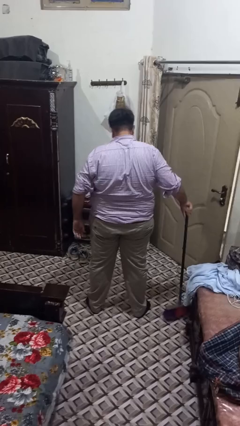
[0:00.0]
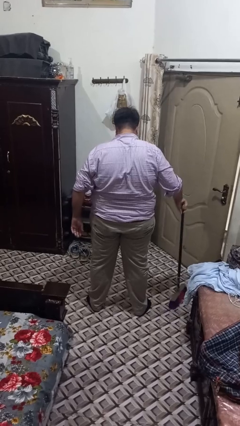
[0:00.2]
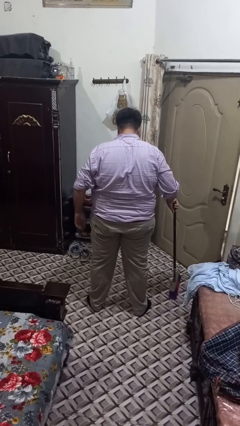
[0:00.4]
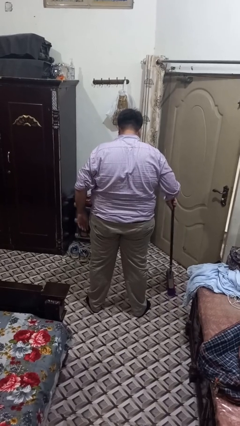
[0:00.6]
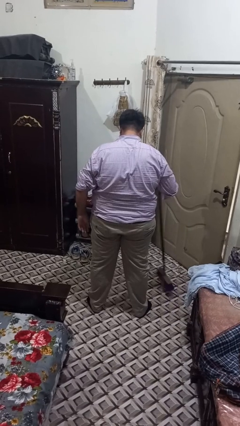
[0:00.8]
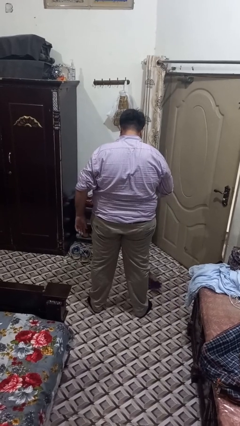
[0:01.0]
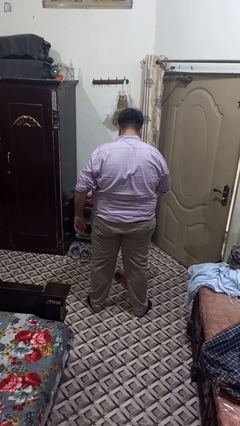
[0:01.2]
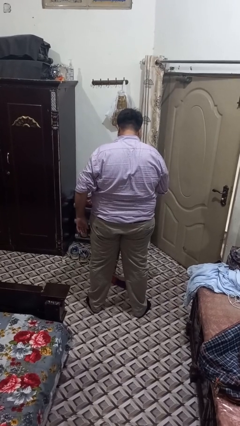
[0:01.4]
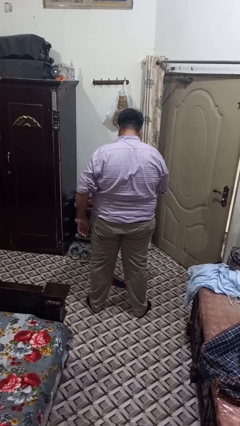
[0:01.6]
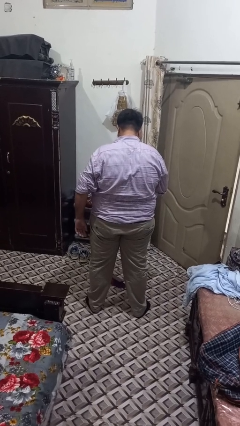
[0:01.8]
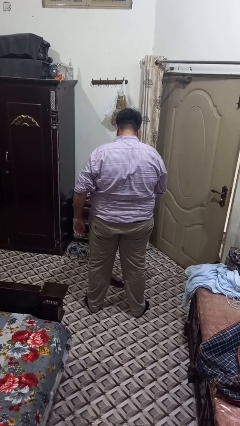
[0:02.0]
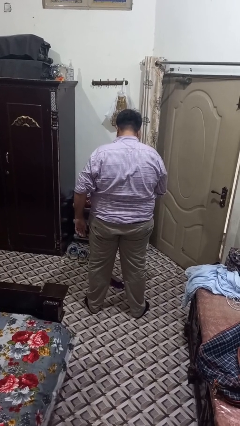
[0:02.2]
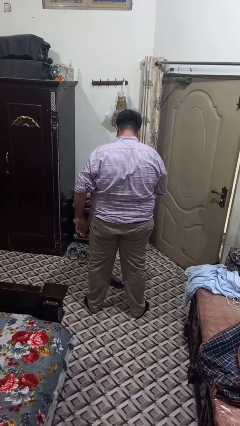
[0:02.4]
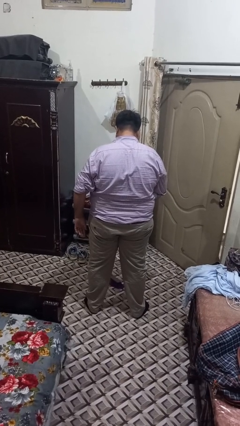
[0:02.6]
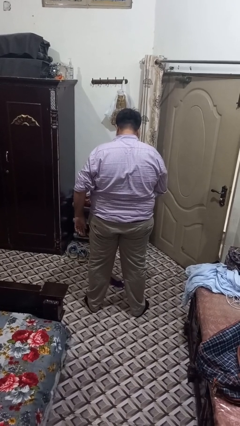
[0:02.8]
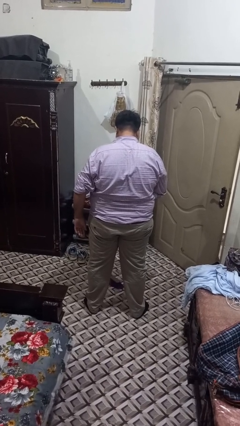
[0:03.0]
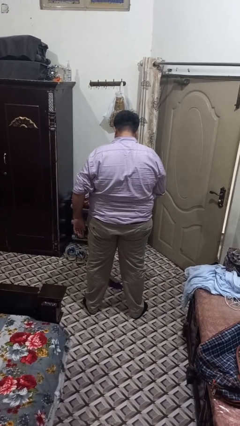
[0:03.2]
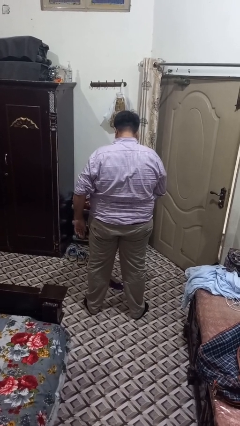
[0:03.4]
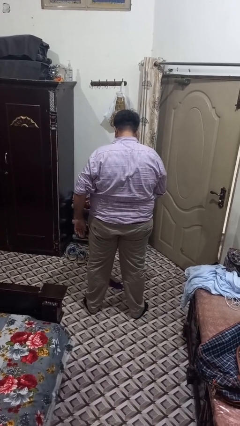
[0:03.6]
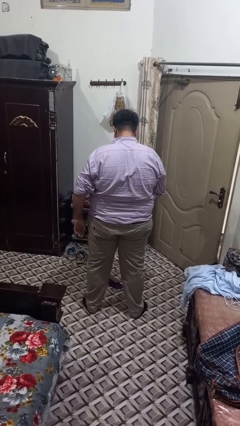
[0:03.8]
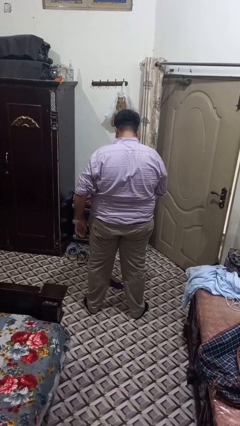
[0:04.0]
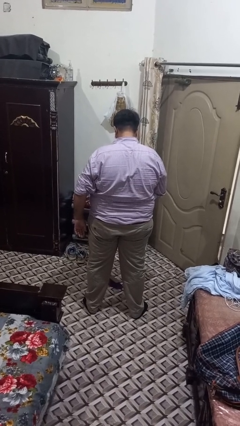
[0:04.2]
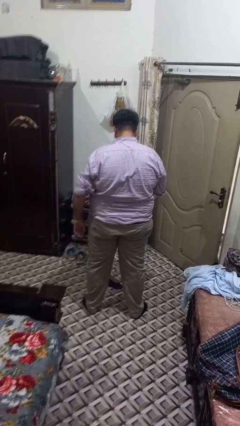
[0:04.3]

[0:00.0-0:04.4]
person sweeps floor

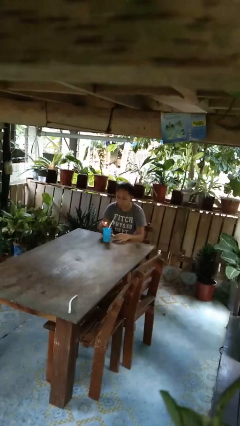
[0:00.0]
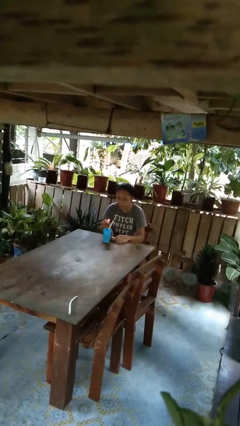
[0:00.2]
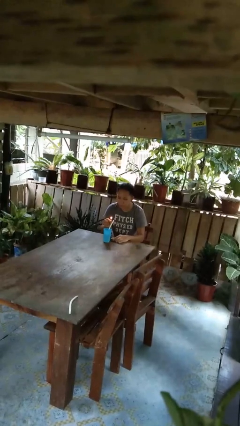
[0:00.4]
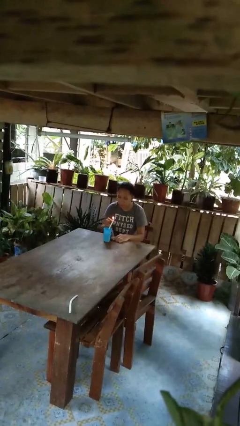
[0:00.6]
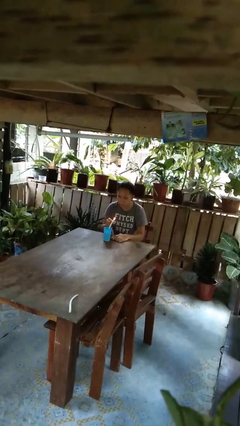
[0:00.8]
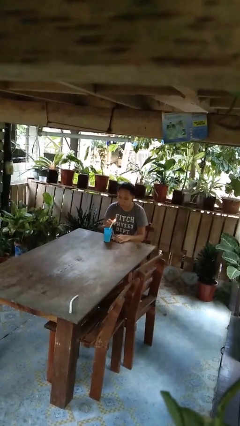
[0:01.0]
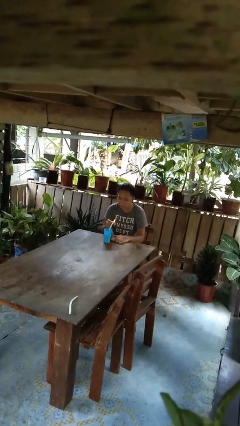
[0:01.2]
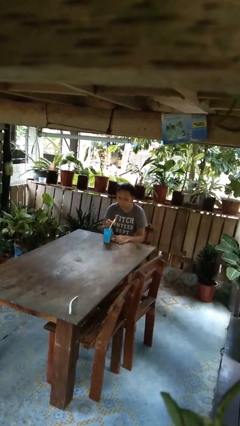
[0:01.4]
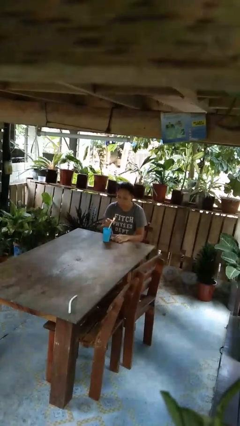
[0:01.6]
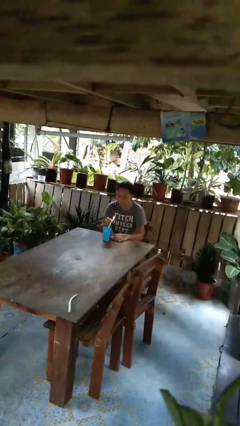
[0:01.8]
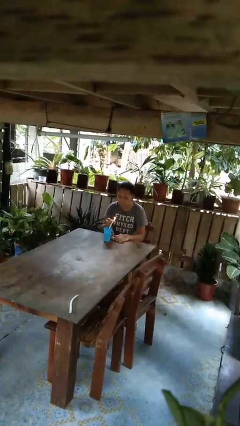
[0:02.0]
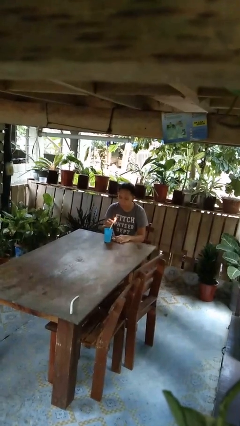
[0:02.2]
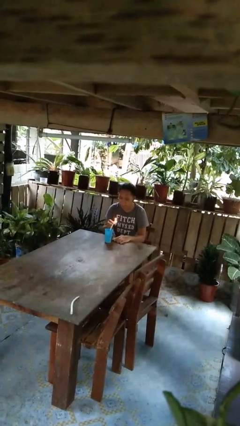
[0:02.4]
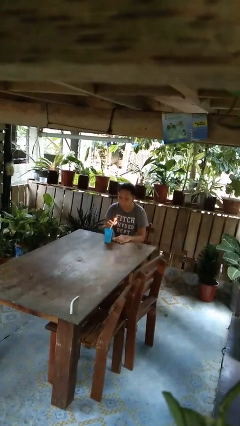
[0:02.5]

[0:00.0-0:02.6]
person lights candle

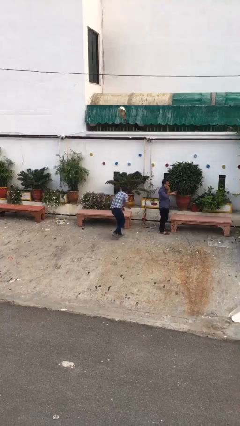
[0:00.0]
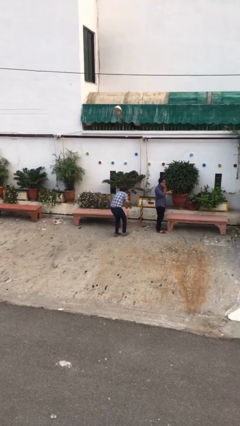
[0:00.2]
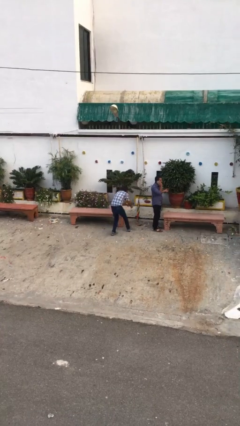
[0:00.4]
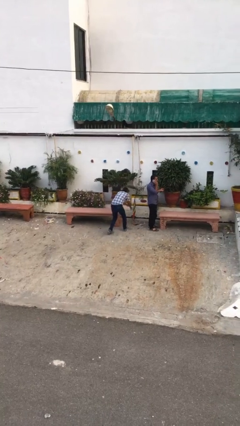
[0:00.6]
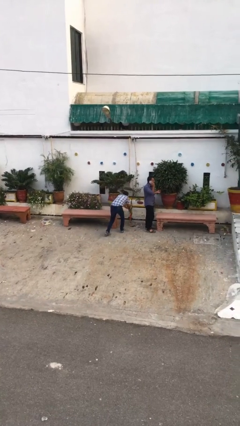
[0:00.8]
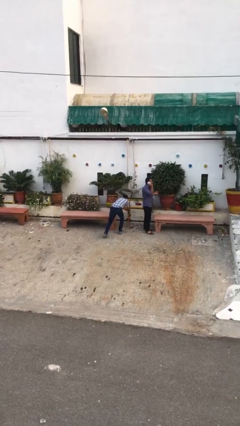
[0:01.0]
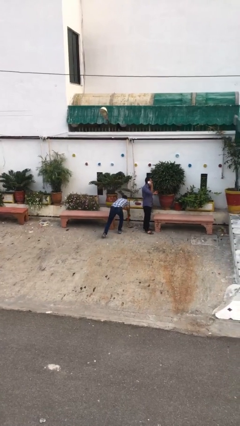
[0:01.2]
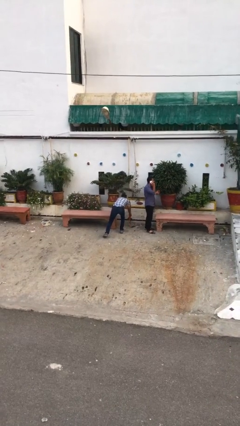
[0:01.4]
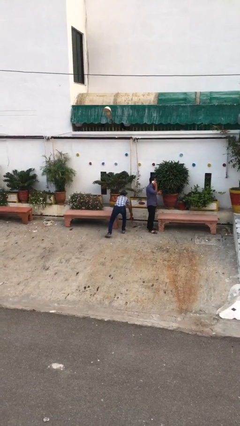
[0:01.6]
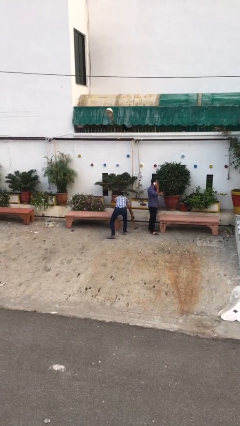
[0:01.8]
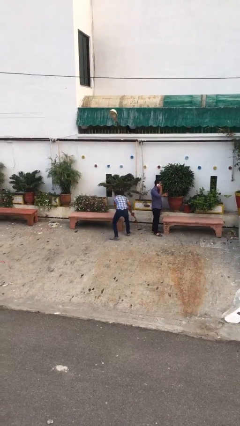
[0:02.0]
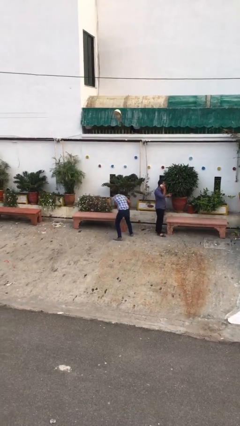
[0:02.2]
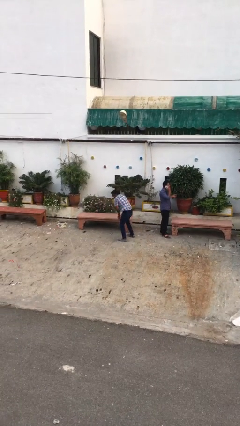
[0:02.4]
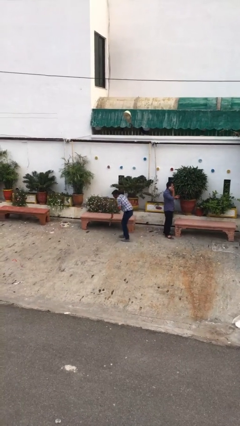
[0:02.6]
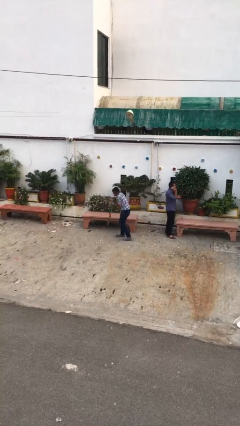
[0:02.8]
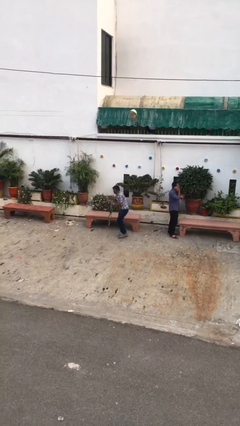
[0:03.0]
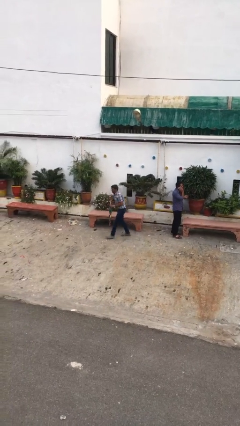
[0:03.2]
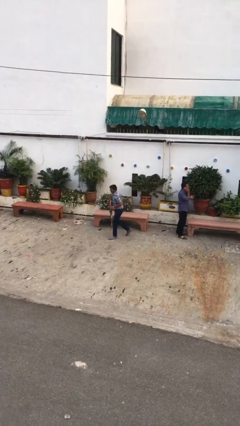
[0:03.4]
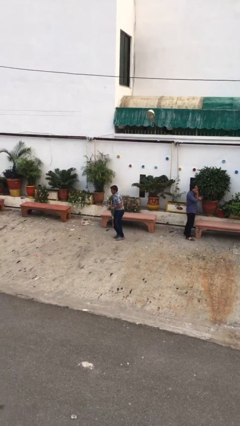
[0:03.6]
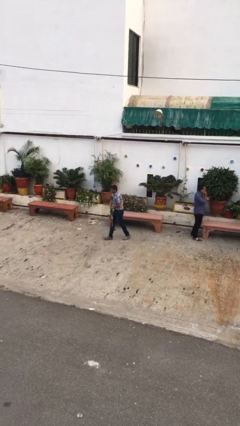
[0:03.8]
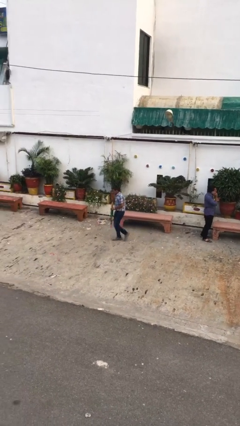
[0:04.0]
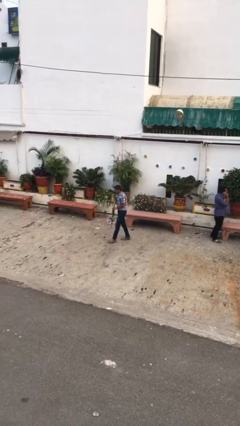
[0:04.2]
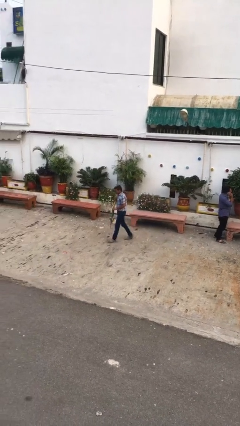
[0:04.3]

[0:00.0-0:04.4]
person steals object from person

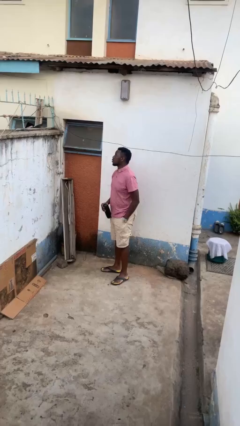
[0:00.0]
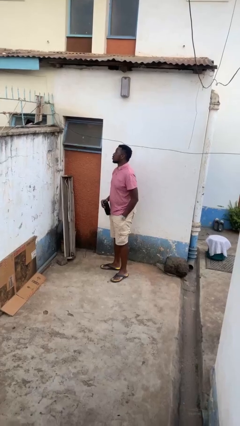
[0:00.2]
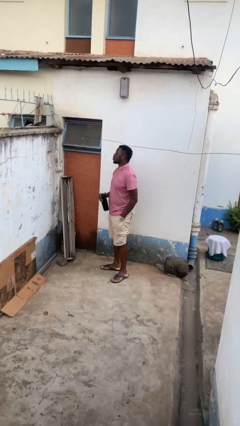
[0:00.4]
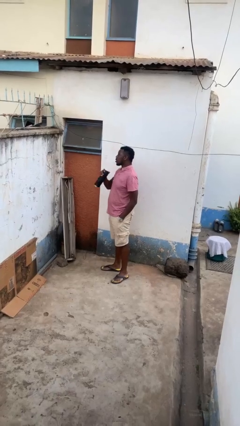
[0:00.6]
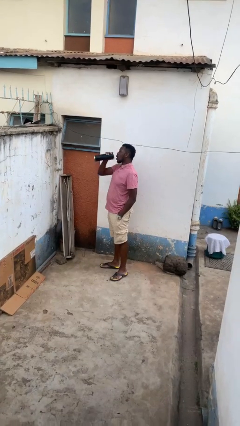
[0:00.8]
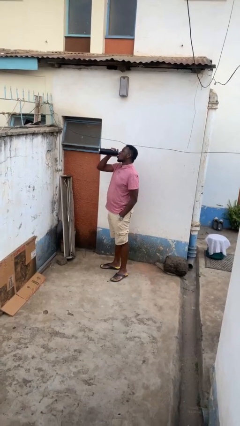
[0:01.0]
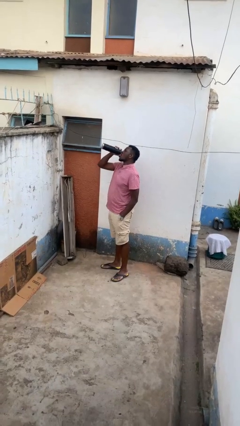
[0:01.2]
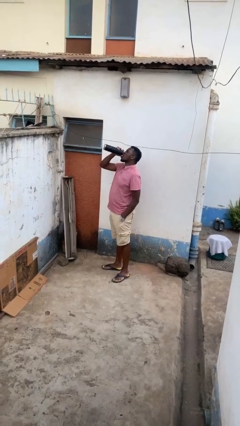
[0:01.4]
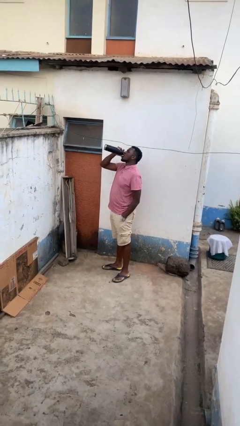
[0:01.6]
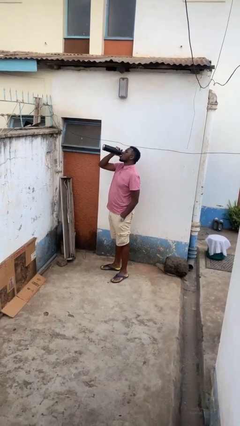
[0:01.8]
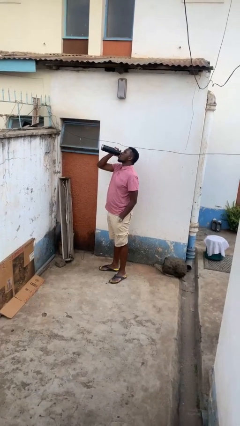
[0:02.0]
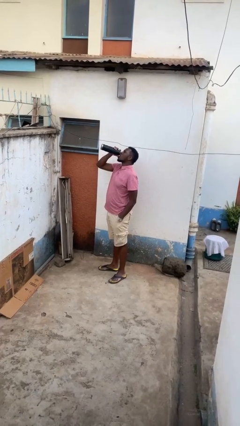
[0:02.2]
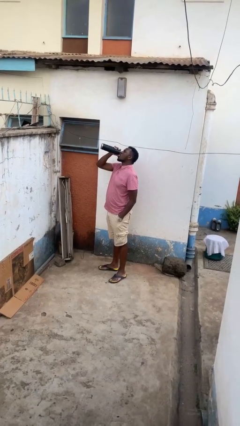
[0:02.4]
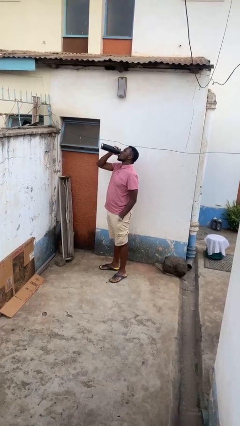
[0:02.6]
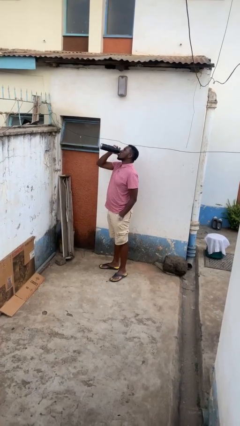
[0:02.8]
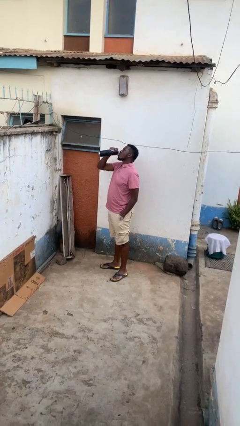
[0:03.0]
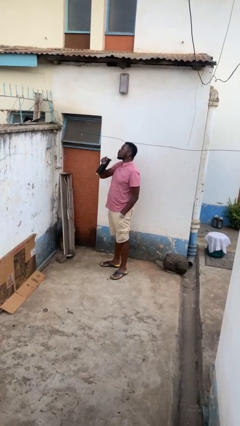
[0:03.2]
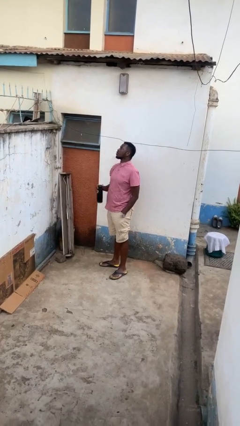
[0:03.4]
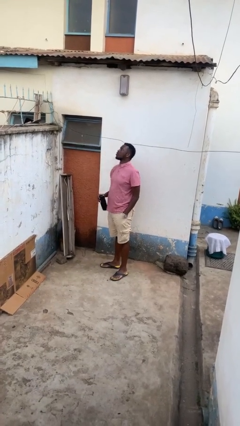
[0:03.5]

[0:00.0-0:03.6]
person drinks from bottle

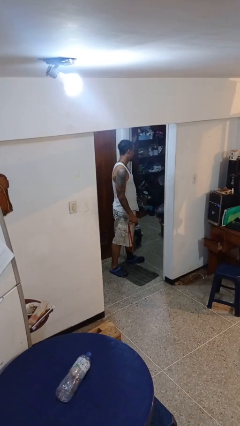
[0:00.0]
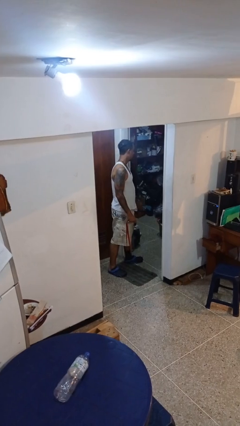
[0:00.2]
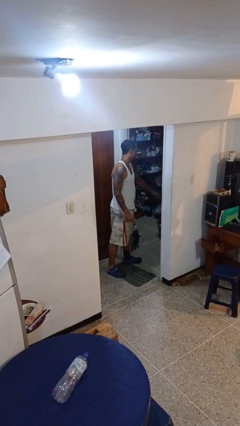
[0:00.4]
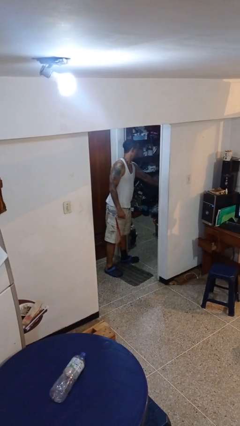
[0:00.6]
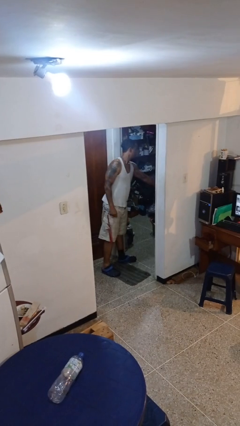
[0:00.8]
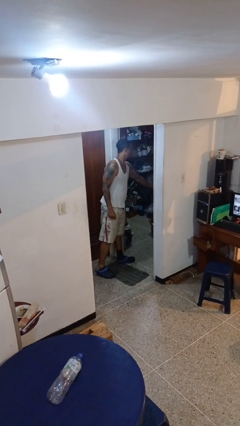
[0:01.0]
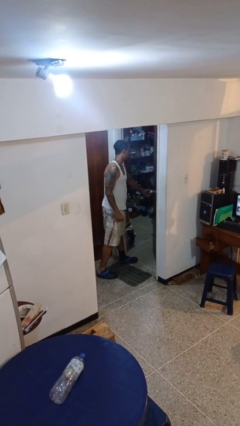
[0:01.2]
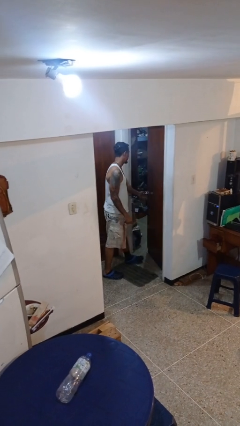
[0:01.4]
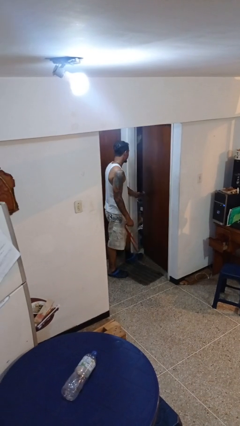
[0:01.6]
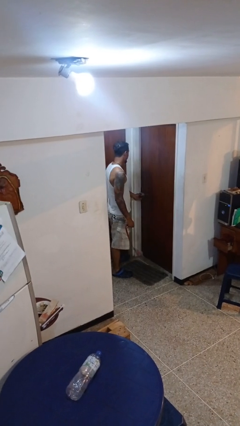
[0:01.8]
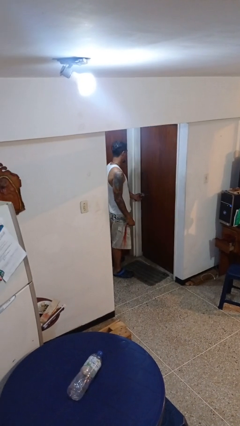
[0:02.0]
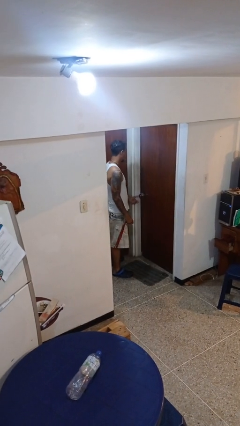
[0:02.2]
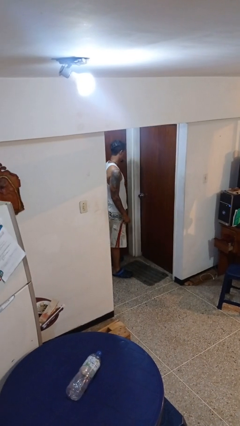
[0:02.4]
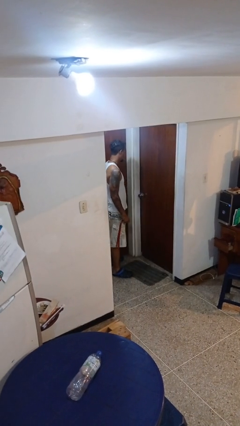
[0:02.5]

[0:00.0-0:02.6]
person closes facility door
